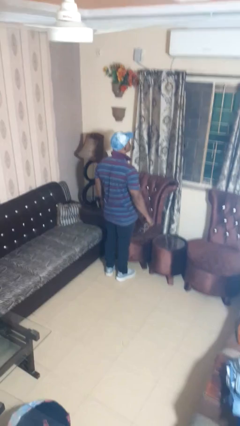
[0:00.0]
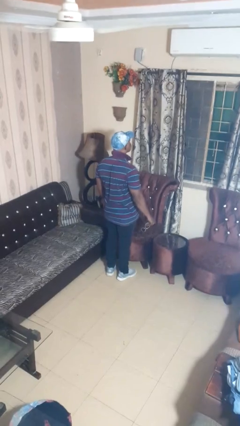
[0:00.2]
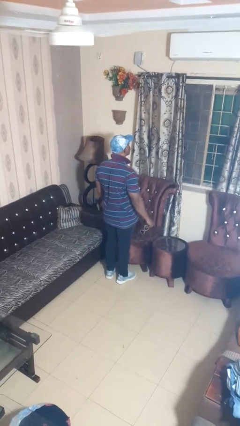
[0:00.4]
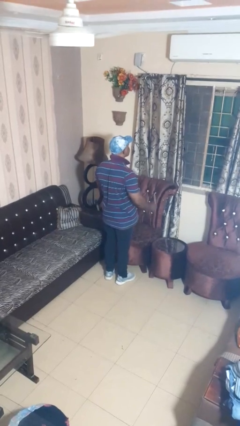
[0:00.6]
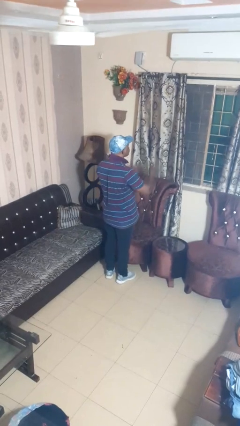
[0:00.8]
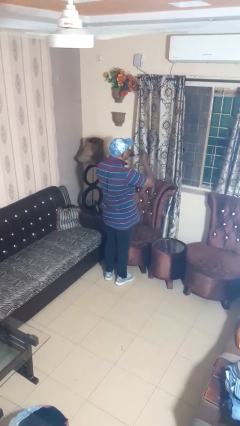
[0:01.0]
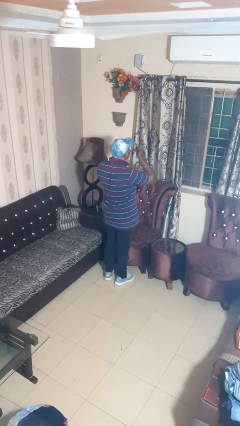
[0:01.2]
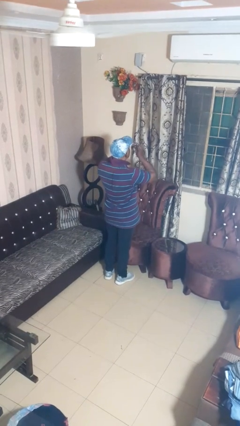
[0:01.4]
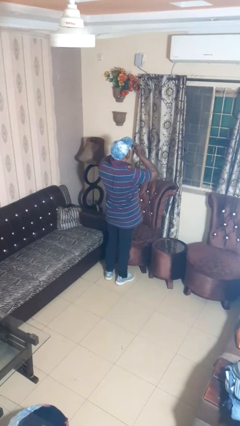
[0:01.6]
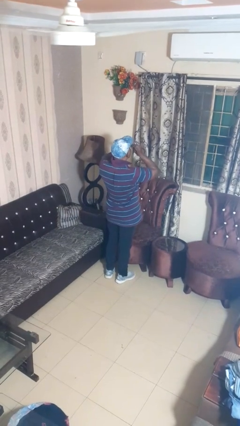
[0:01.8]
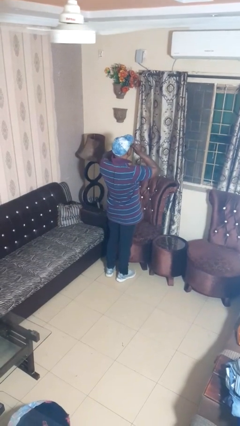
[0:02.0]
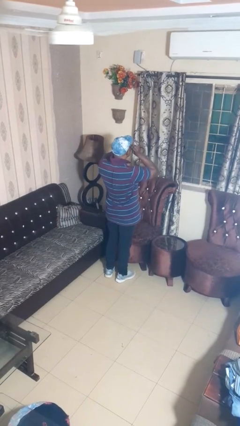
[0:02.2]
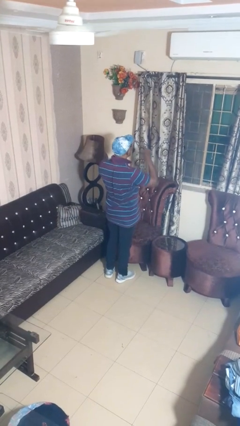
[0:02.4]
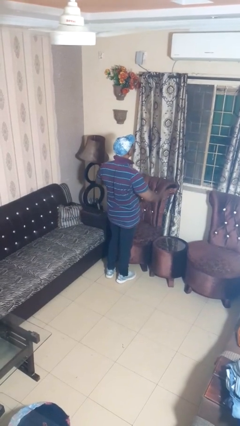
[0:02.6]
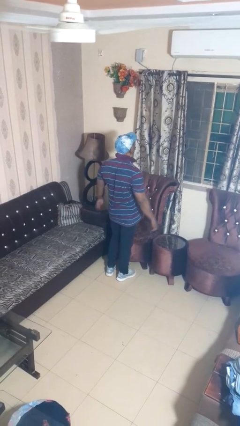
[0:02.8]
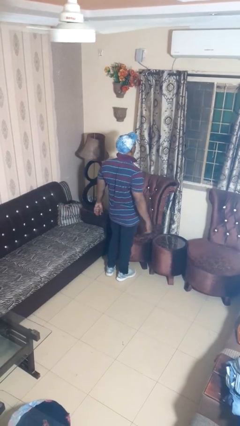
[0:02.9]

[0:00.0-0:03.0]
person puts on sunglasses

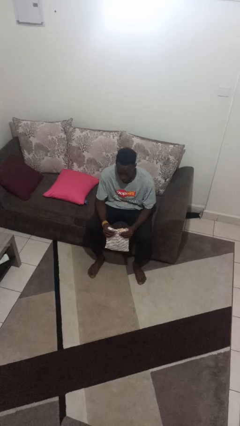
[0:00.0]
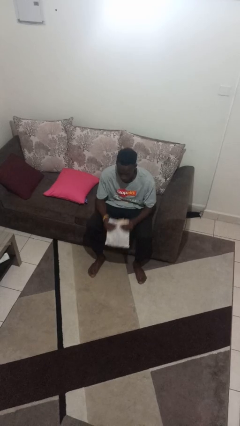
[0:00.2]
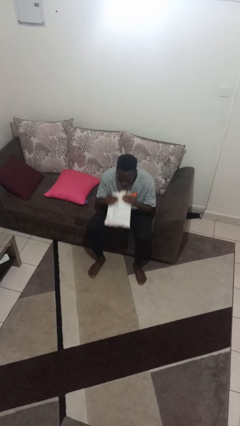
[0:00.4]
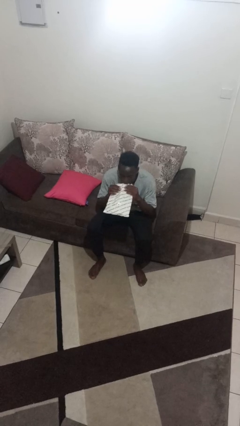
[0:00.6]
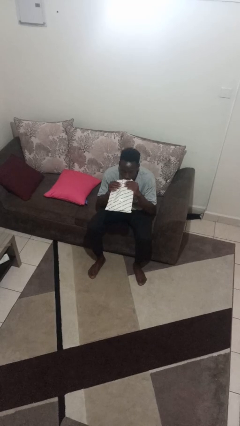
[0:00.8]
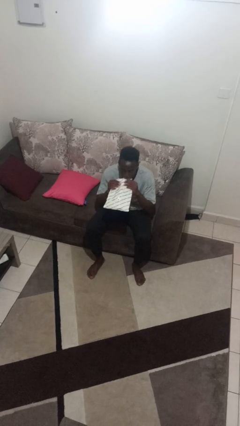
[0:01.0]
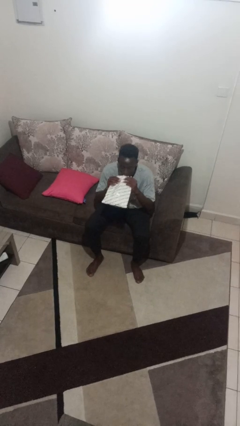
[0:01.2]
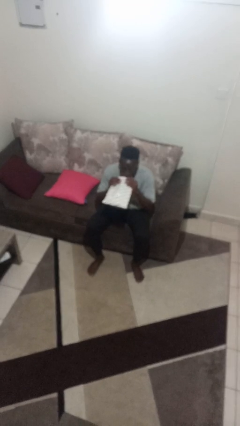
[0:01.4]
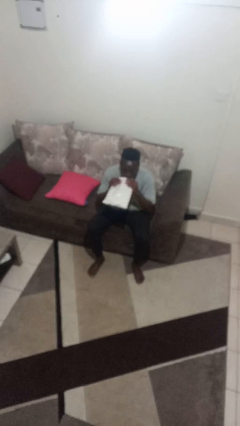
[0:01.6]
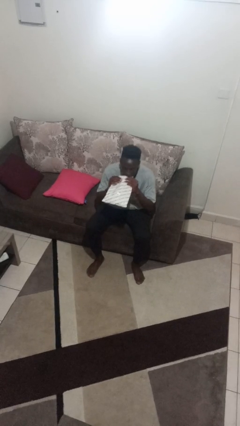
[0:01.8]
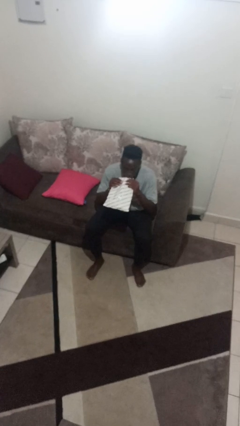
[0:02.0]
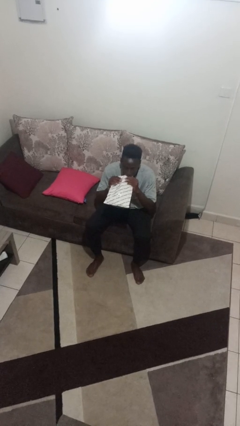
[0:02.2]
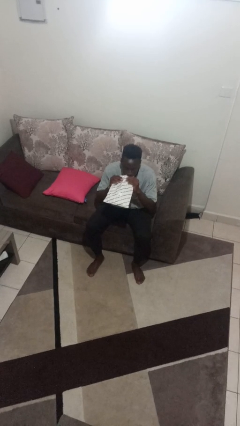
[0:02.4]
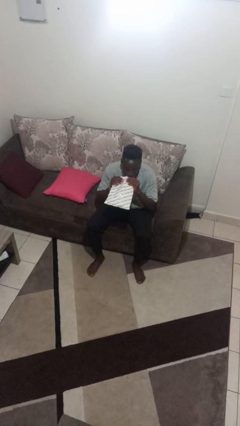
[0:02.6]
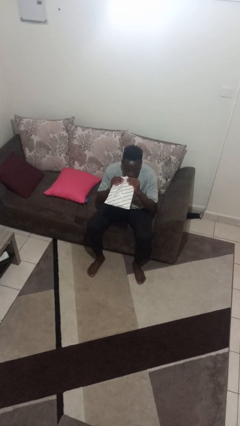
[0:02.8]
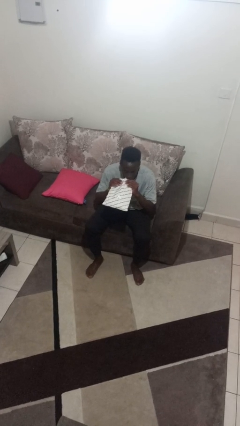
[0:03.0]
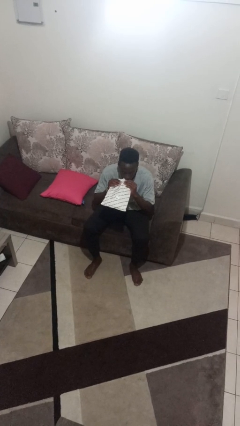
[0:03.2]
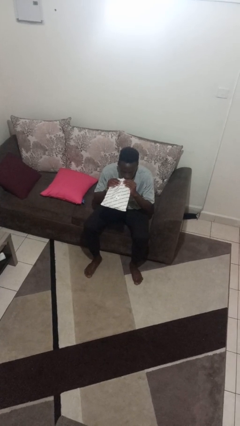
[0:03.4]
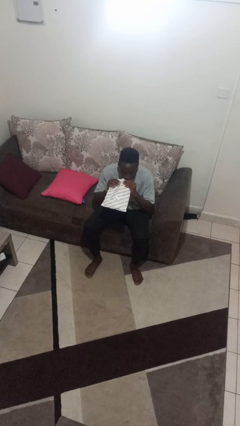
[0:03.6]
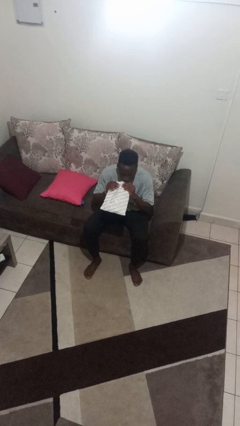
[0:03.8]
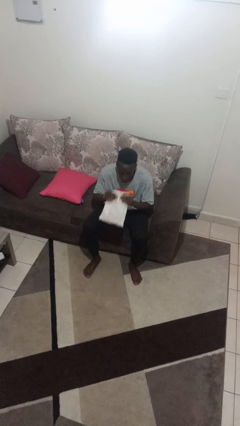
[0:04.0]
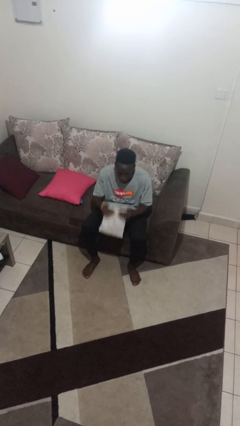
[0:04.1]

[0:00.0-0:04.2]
person eats snack from bag

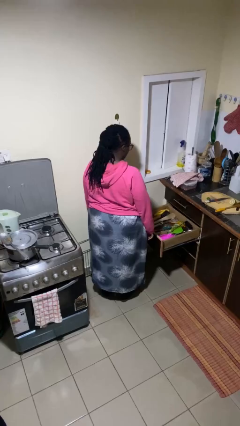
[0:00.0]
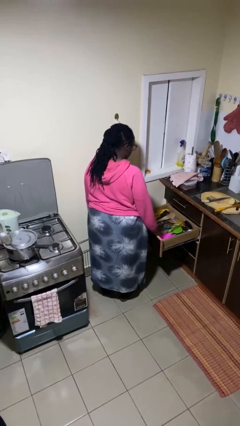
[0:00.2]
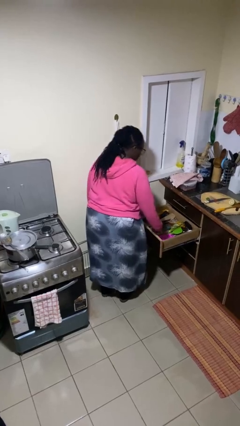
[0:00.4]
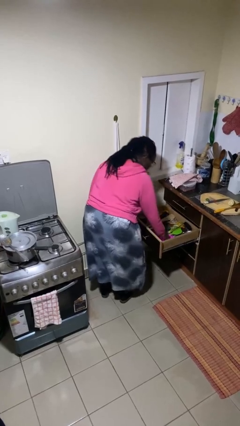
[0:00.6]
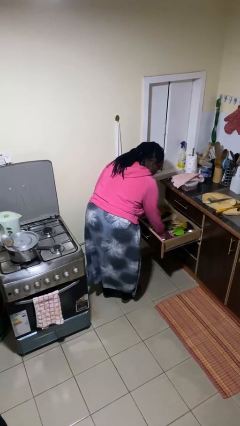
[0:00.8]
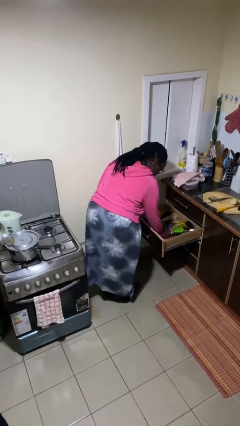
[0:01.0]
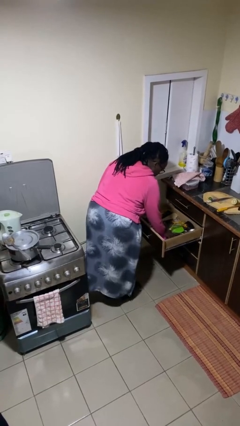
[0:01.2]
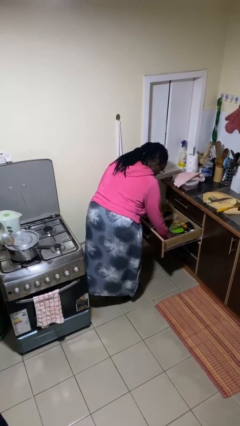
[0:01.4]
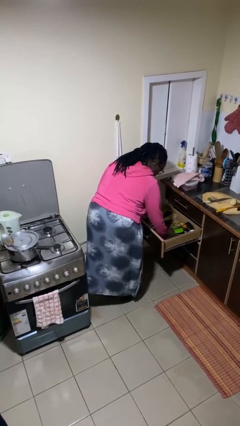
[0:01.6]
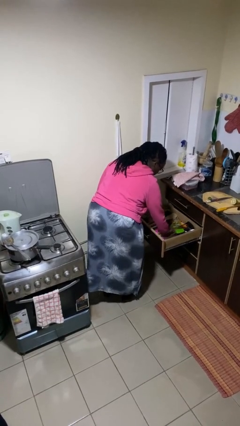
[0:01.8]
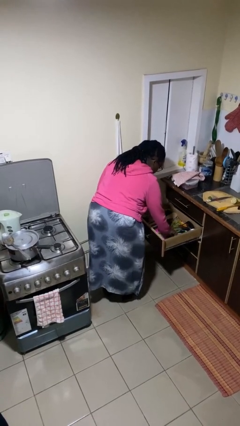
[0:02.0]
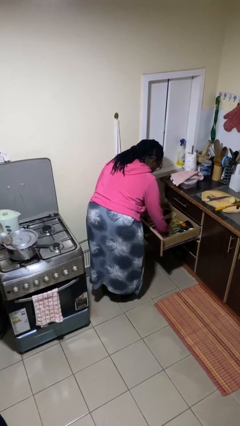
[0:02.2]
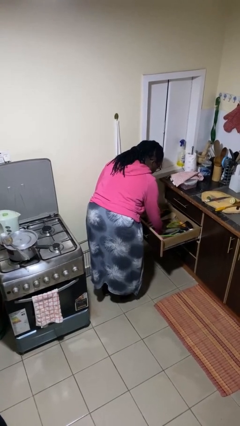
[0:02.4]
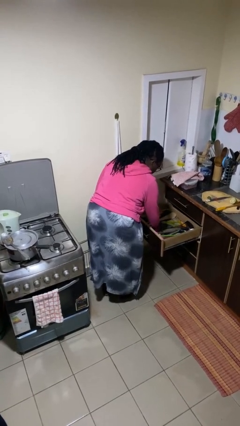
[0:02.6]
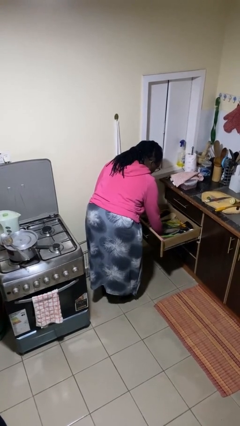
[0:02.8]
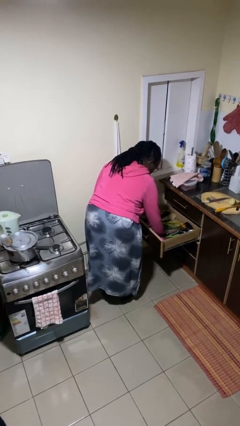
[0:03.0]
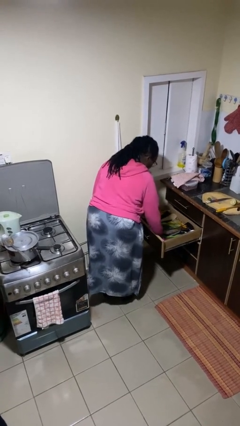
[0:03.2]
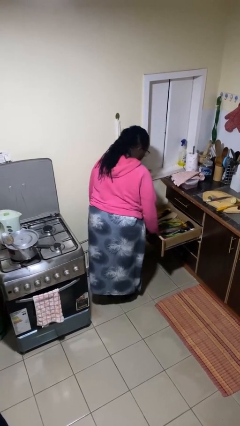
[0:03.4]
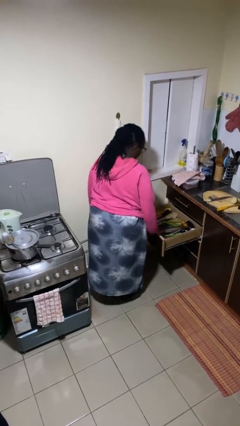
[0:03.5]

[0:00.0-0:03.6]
person searches in kitchen drawer

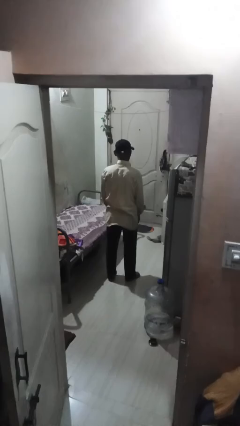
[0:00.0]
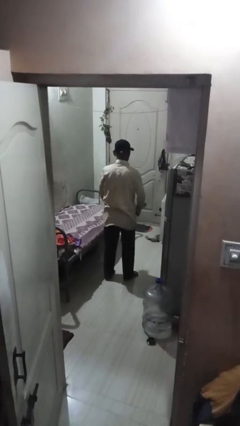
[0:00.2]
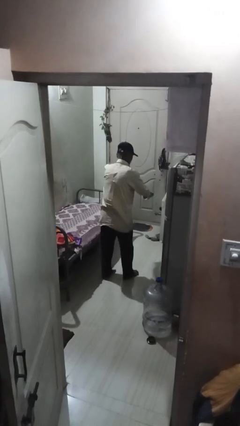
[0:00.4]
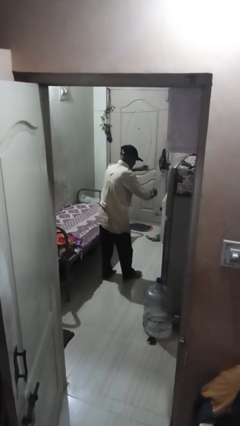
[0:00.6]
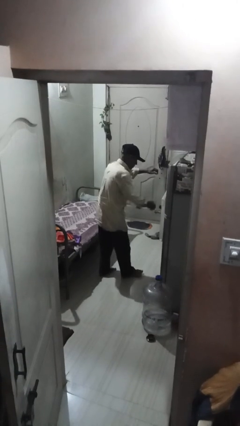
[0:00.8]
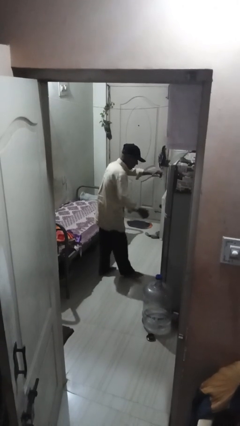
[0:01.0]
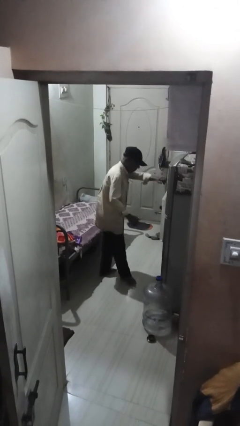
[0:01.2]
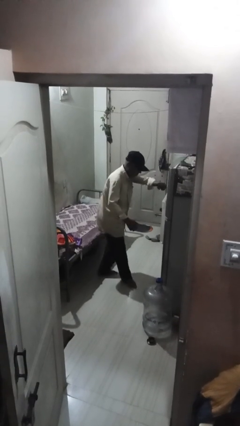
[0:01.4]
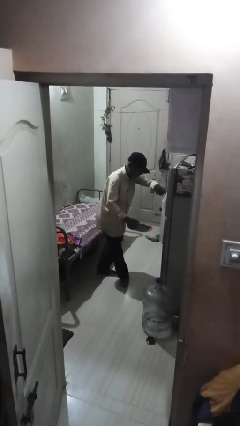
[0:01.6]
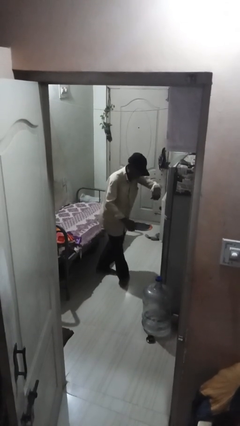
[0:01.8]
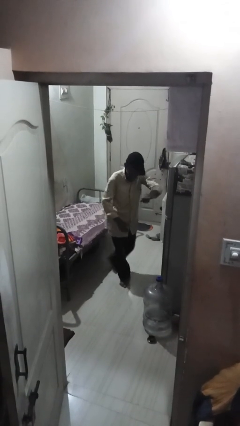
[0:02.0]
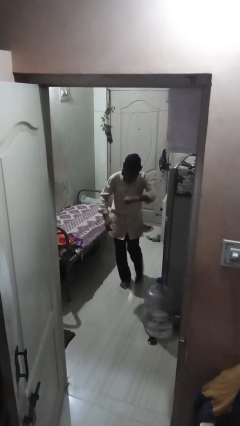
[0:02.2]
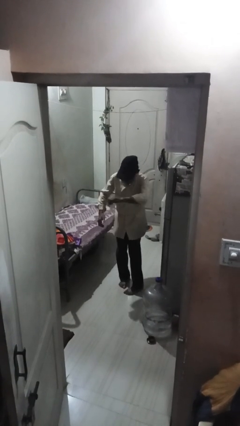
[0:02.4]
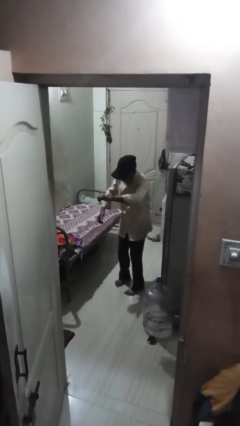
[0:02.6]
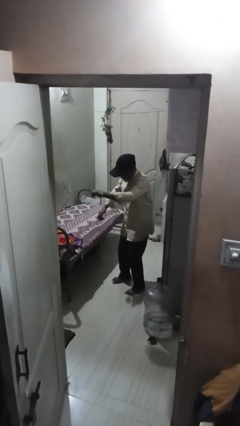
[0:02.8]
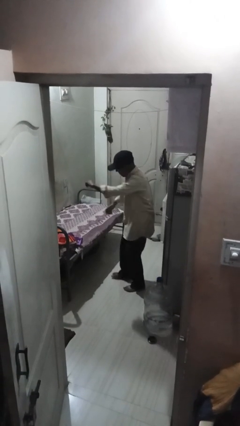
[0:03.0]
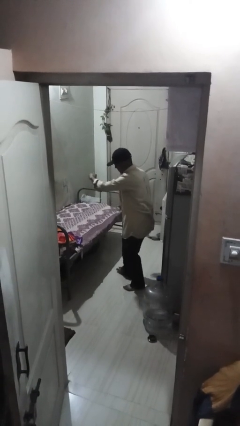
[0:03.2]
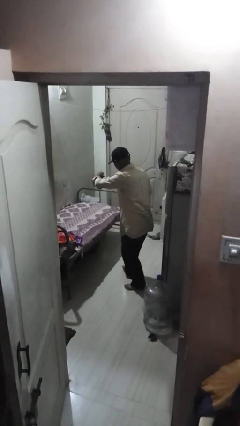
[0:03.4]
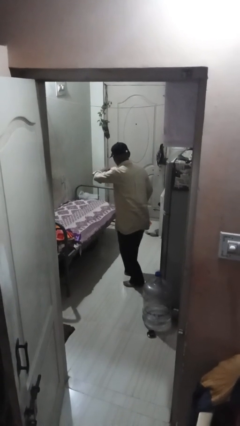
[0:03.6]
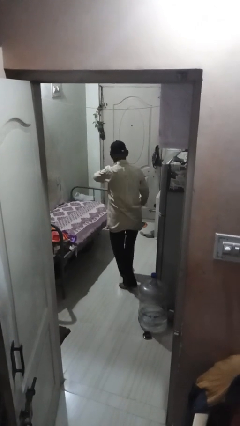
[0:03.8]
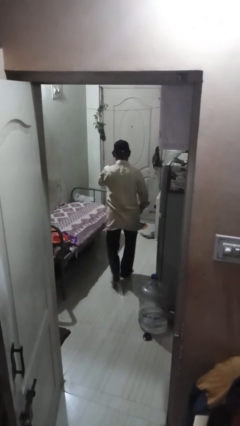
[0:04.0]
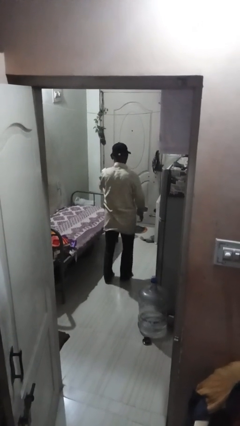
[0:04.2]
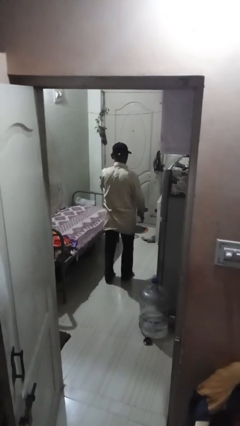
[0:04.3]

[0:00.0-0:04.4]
person twirls

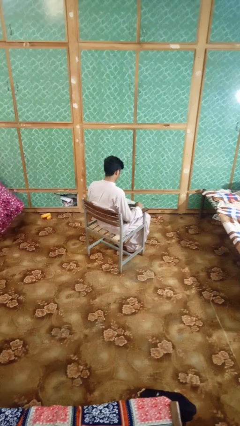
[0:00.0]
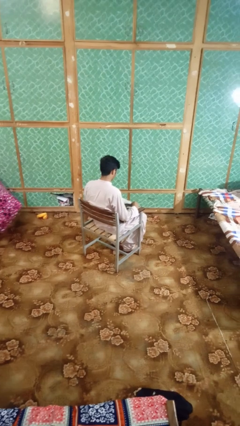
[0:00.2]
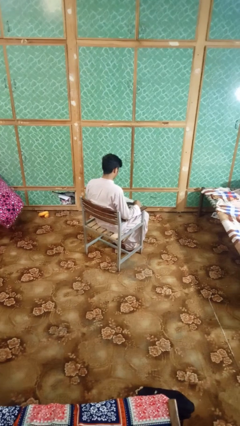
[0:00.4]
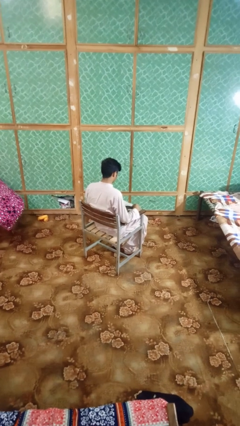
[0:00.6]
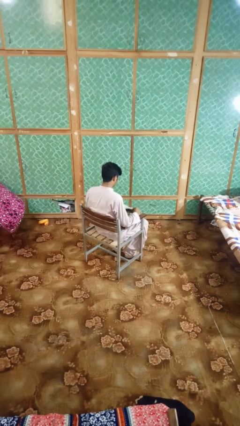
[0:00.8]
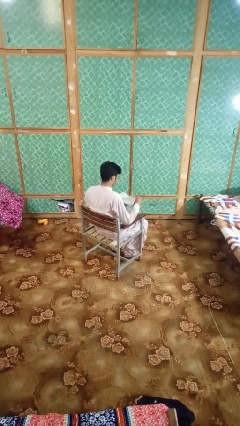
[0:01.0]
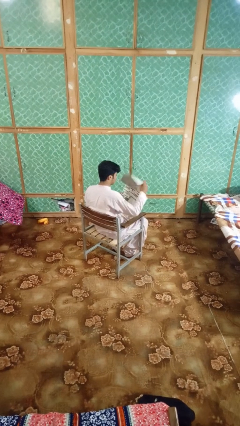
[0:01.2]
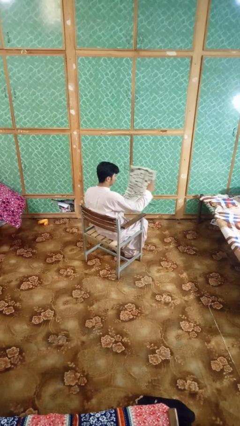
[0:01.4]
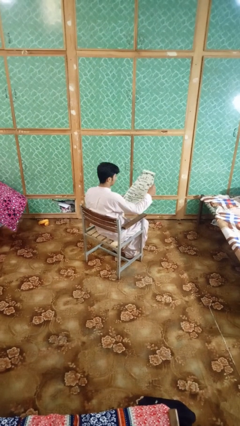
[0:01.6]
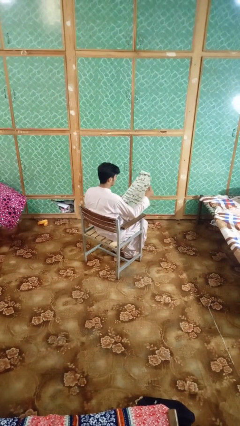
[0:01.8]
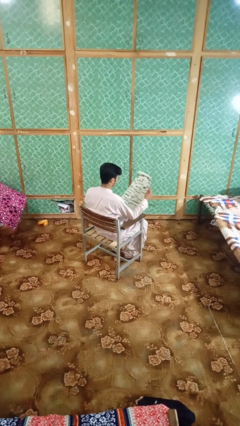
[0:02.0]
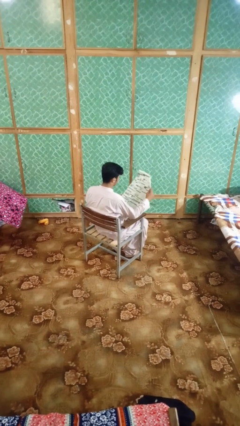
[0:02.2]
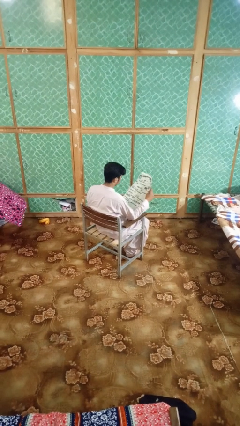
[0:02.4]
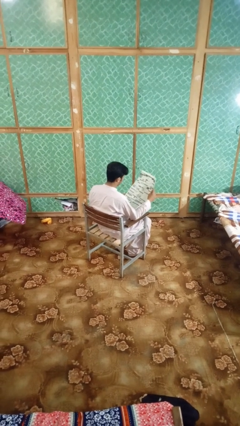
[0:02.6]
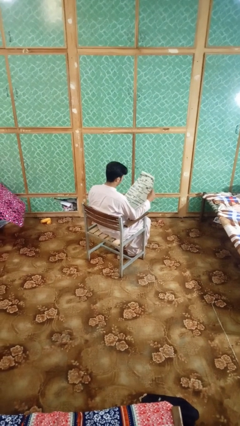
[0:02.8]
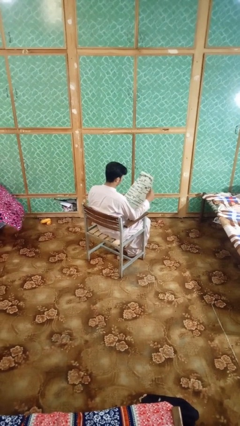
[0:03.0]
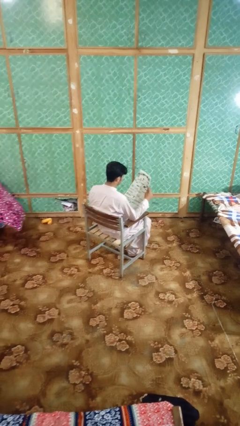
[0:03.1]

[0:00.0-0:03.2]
person reads newspaper
